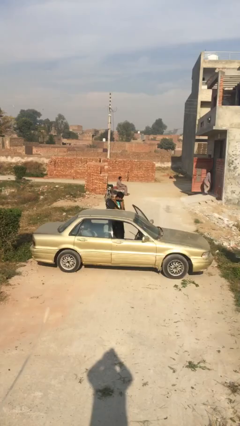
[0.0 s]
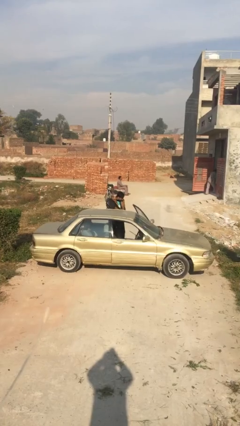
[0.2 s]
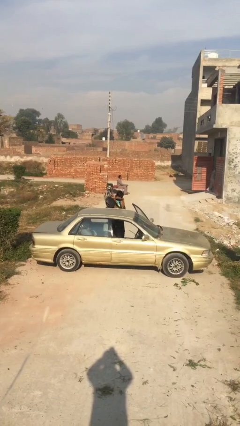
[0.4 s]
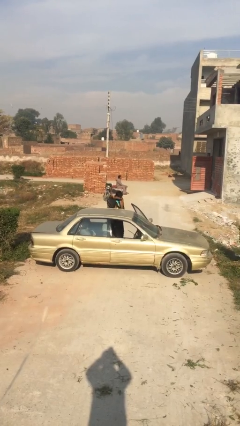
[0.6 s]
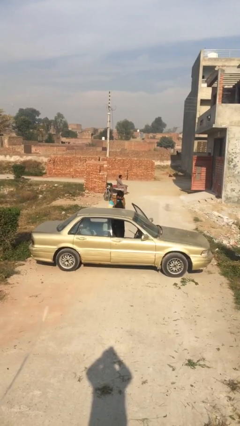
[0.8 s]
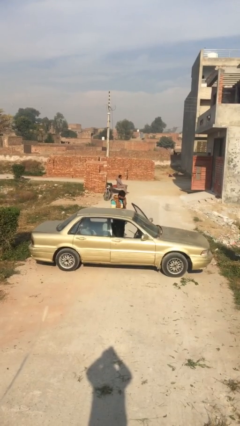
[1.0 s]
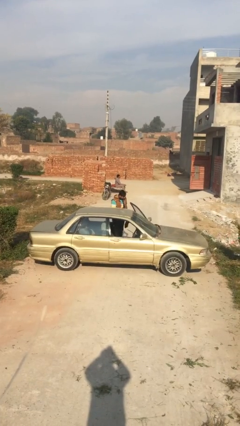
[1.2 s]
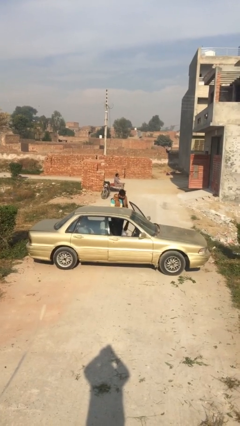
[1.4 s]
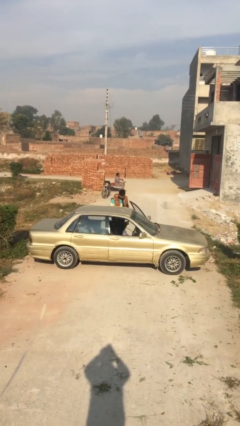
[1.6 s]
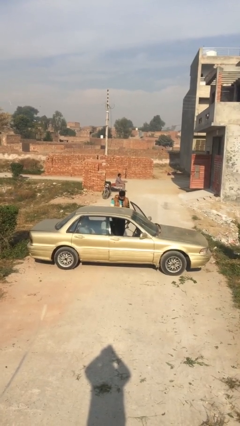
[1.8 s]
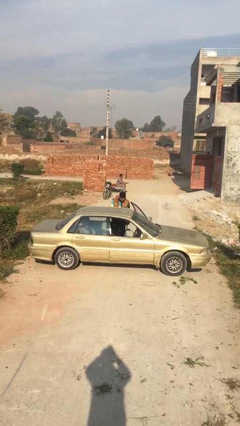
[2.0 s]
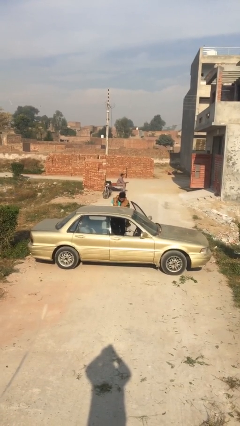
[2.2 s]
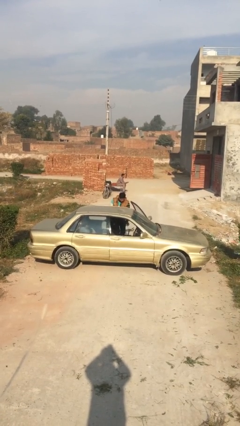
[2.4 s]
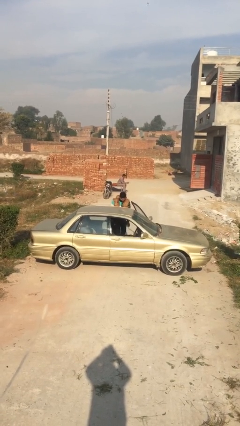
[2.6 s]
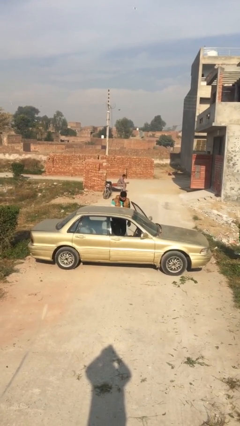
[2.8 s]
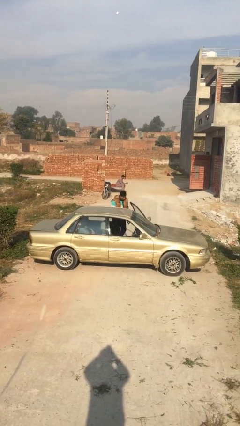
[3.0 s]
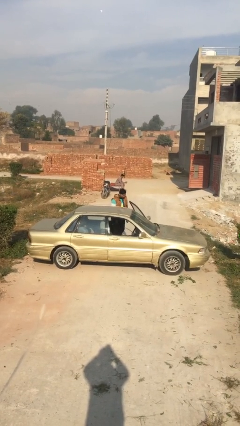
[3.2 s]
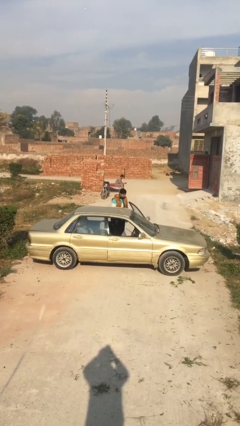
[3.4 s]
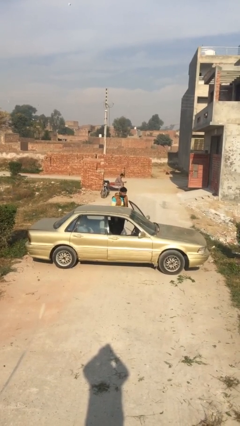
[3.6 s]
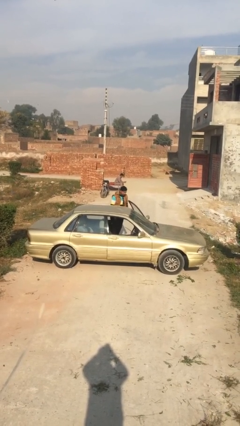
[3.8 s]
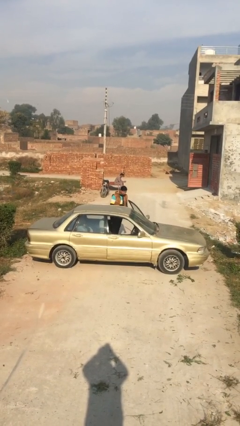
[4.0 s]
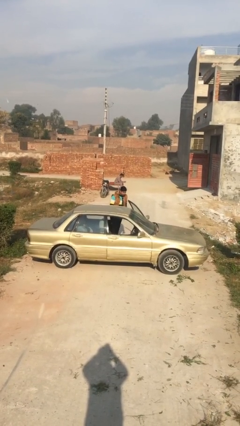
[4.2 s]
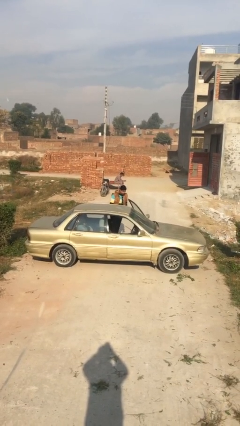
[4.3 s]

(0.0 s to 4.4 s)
person loads car

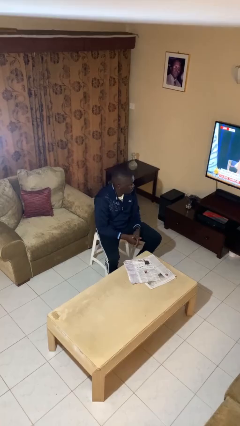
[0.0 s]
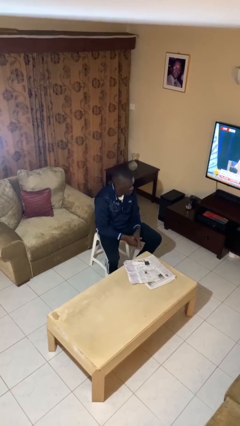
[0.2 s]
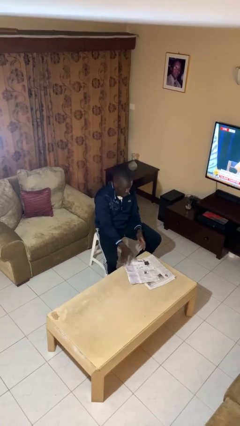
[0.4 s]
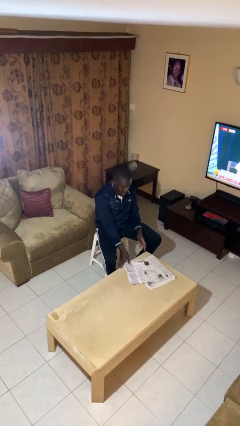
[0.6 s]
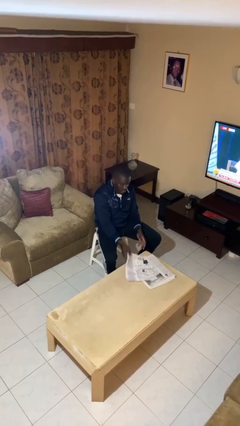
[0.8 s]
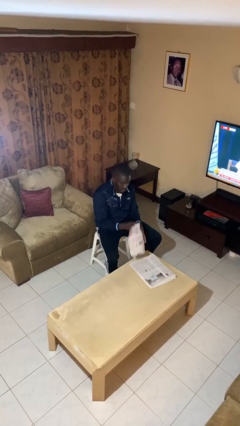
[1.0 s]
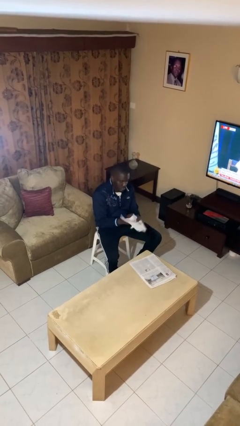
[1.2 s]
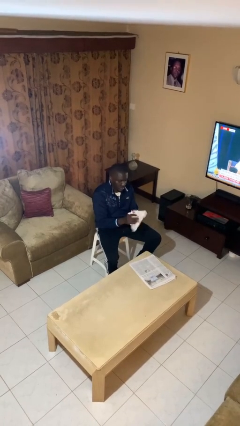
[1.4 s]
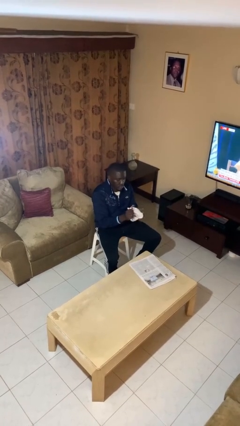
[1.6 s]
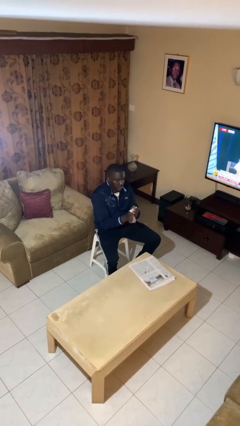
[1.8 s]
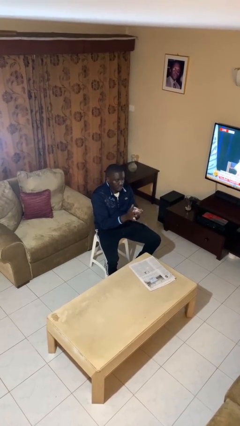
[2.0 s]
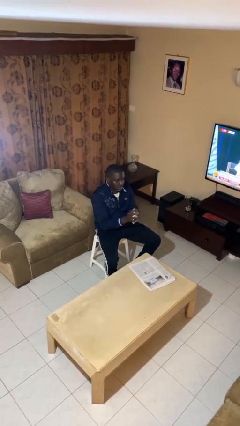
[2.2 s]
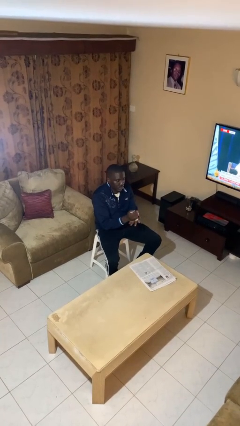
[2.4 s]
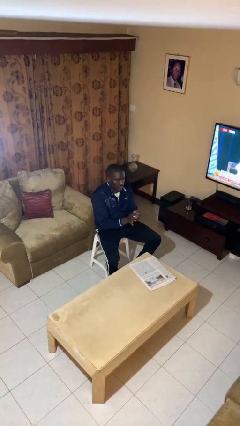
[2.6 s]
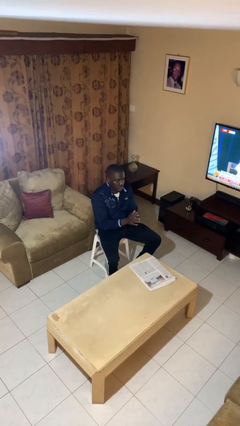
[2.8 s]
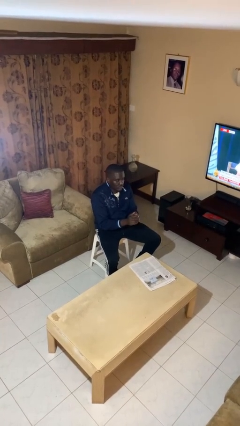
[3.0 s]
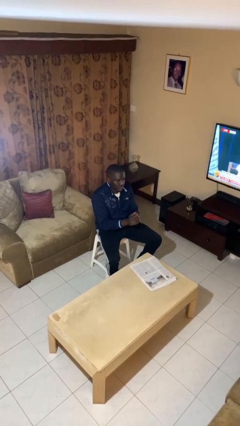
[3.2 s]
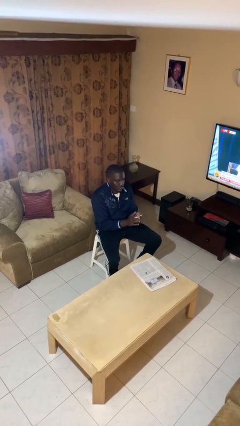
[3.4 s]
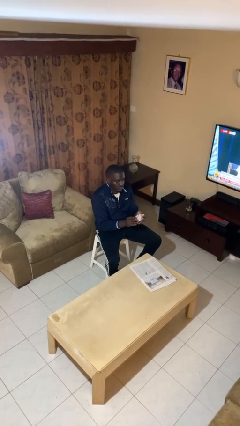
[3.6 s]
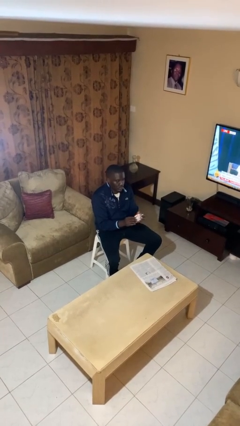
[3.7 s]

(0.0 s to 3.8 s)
person crumples paper

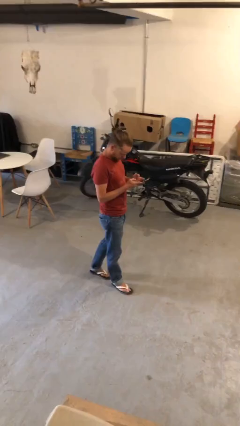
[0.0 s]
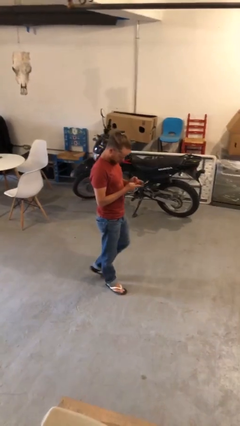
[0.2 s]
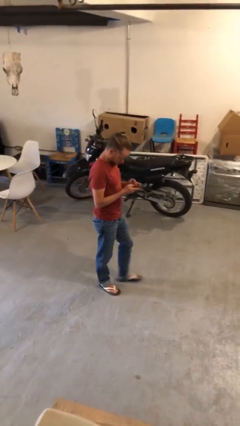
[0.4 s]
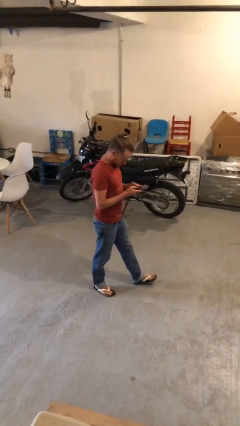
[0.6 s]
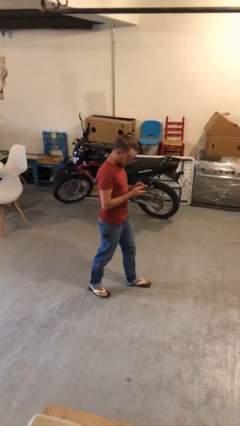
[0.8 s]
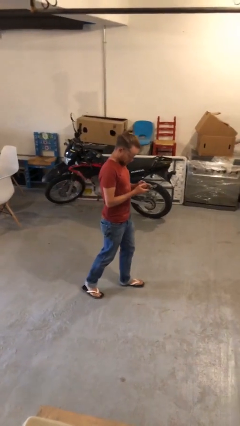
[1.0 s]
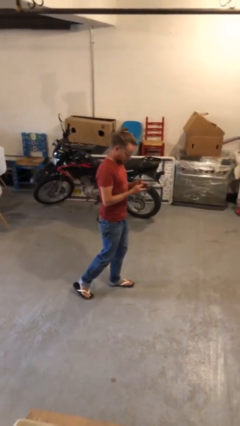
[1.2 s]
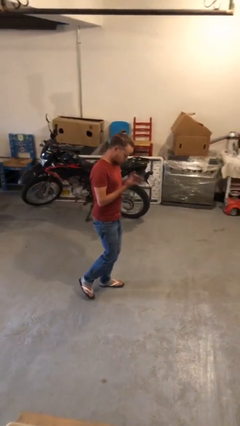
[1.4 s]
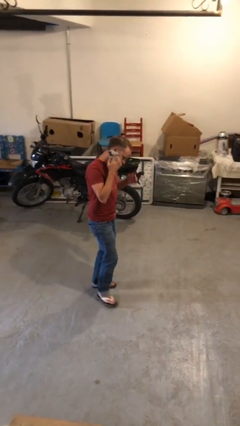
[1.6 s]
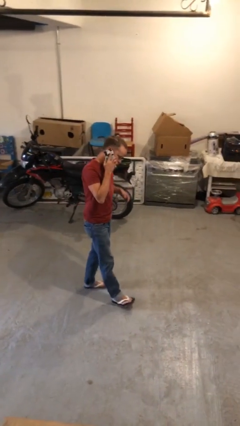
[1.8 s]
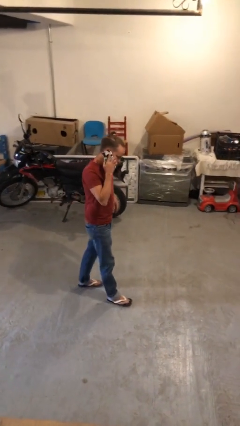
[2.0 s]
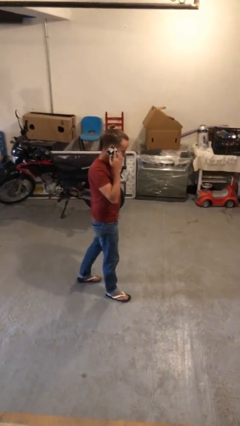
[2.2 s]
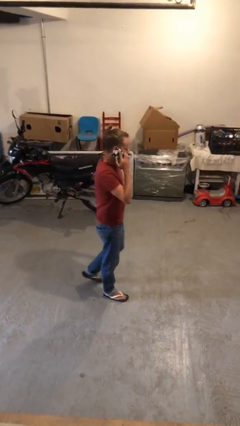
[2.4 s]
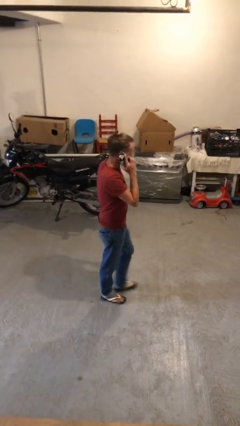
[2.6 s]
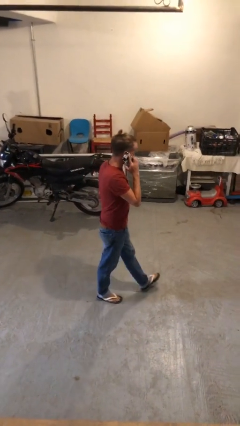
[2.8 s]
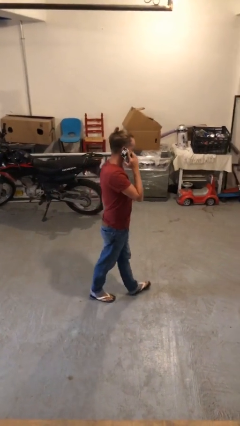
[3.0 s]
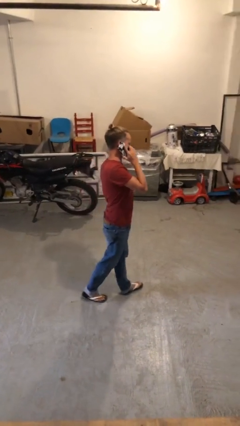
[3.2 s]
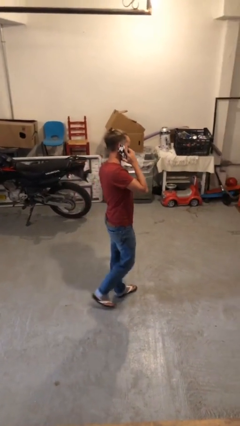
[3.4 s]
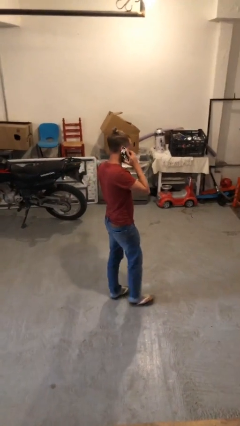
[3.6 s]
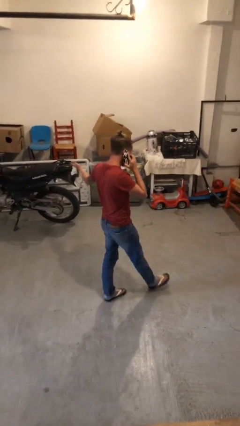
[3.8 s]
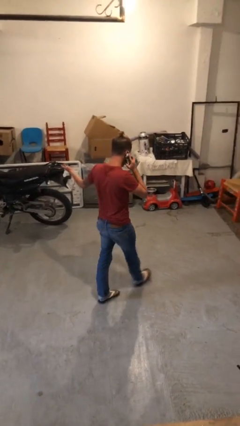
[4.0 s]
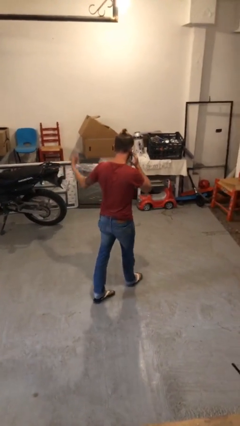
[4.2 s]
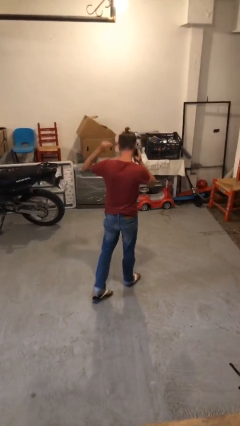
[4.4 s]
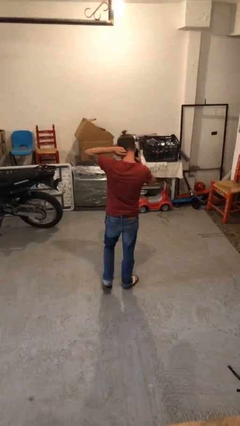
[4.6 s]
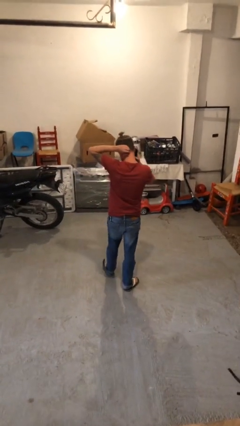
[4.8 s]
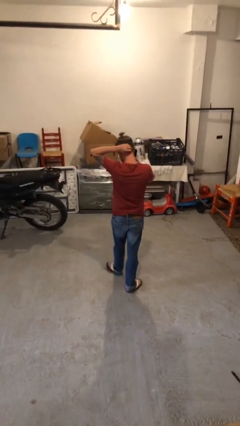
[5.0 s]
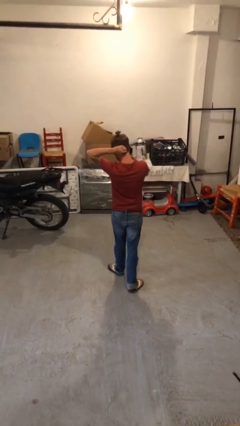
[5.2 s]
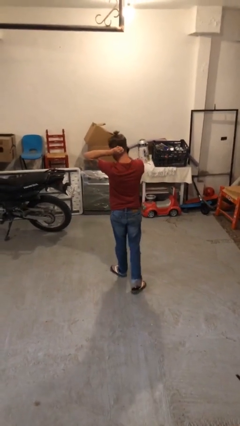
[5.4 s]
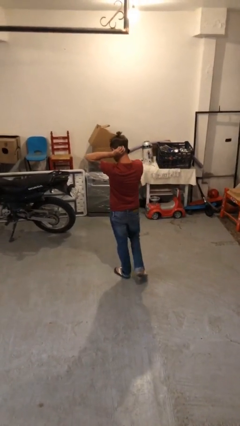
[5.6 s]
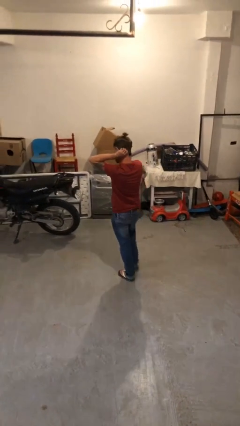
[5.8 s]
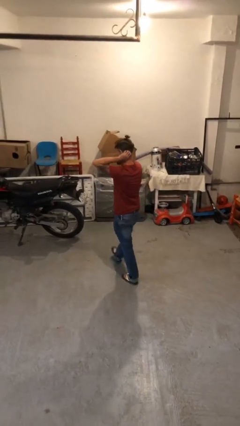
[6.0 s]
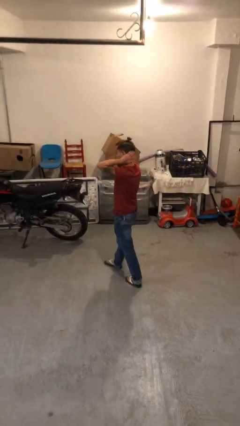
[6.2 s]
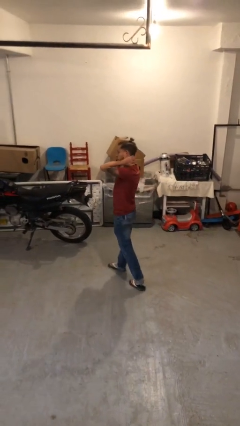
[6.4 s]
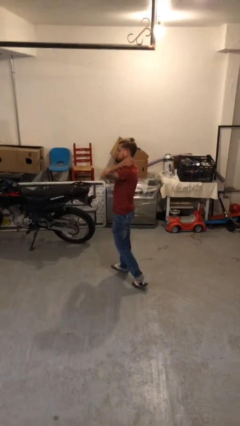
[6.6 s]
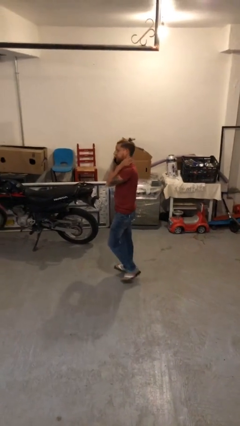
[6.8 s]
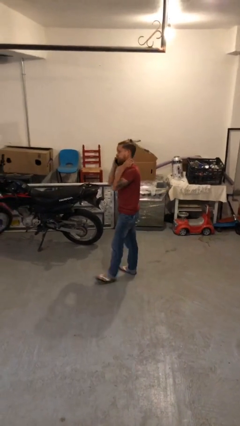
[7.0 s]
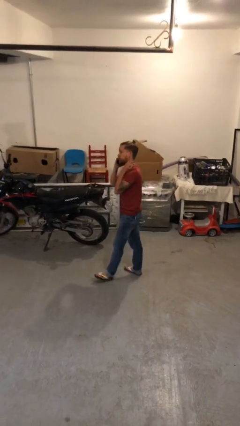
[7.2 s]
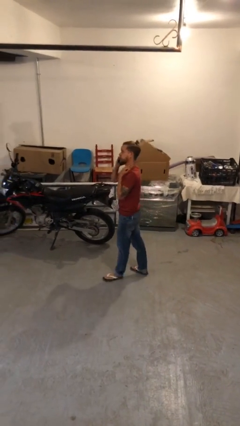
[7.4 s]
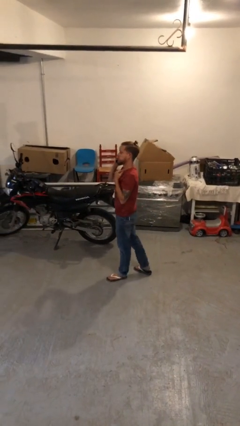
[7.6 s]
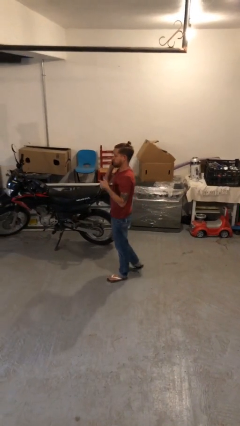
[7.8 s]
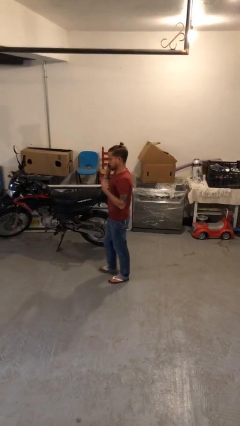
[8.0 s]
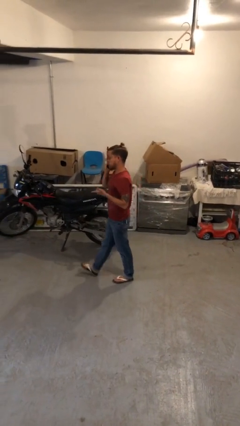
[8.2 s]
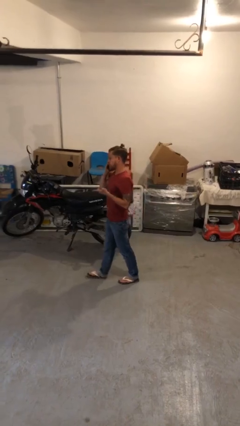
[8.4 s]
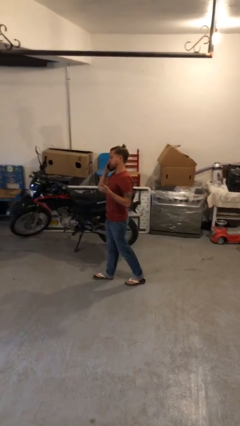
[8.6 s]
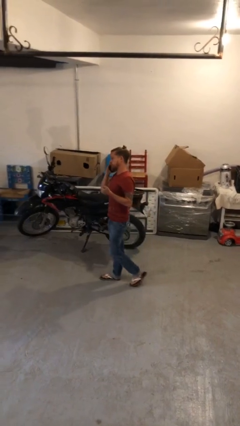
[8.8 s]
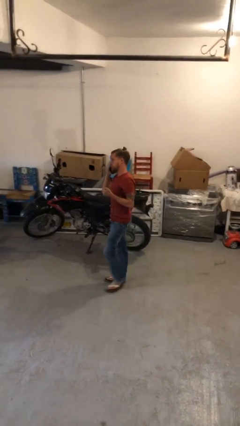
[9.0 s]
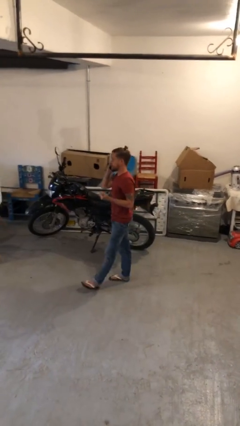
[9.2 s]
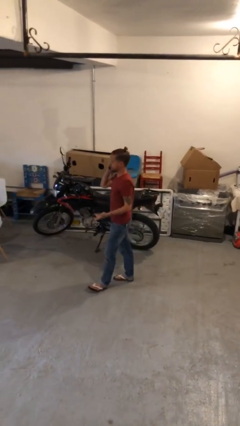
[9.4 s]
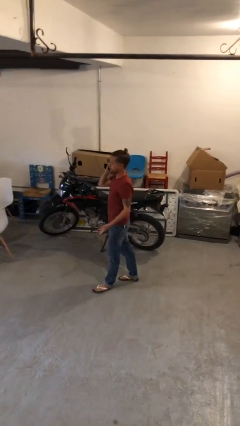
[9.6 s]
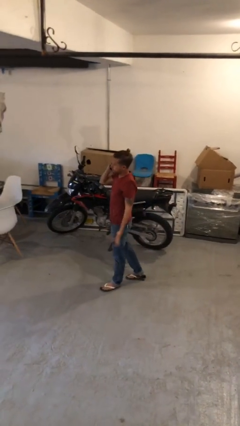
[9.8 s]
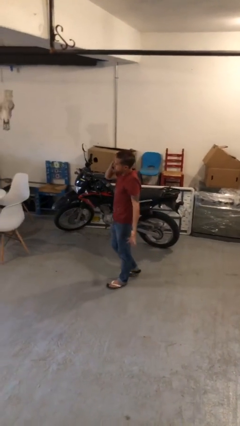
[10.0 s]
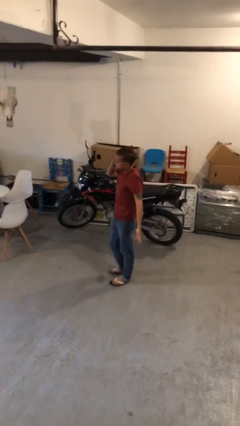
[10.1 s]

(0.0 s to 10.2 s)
person talks on phone
